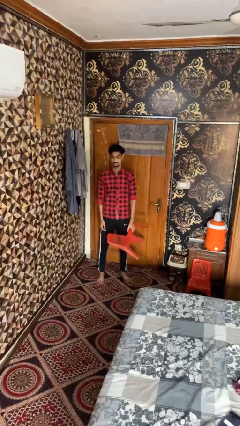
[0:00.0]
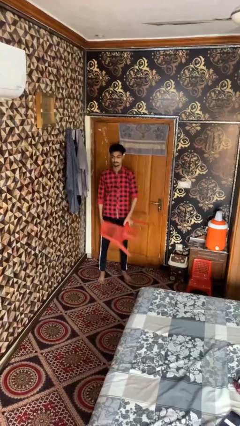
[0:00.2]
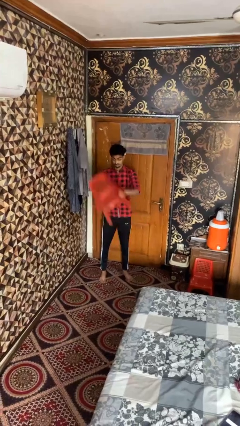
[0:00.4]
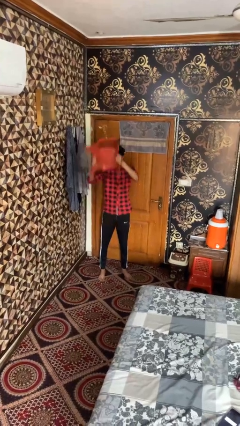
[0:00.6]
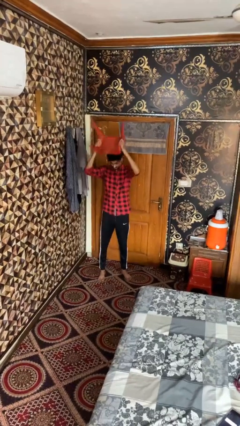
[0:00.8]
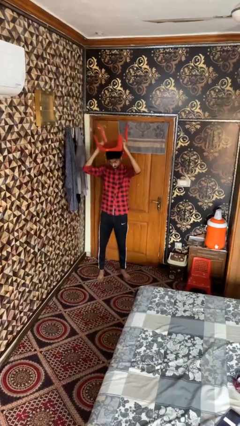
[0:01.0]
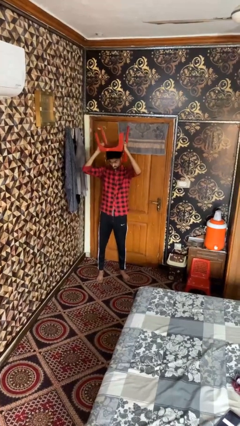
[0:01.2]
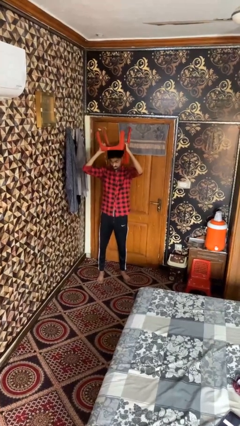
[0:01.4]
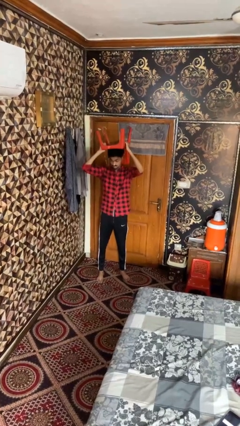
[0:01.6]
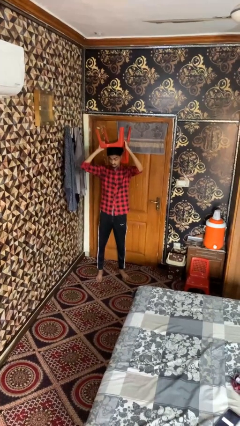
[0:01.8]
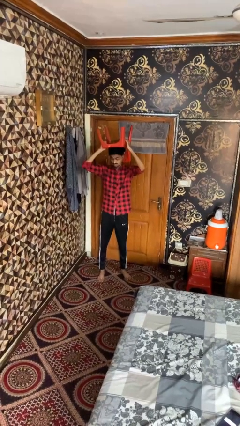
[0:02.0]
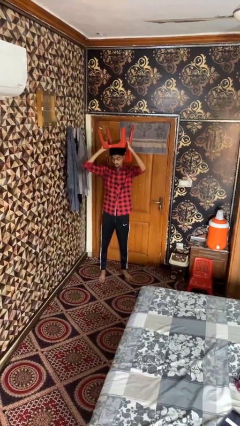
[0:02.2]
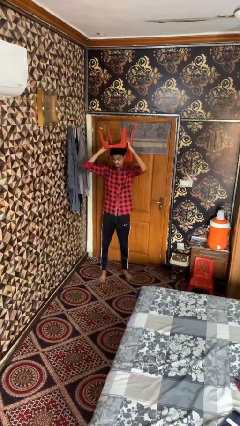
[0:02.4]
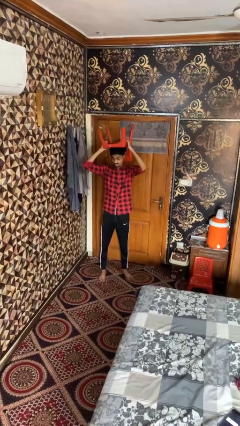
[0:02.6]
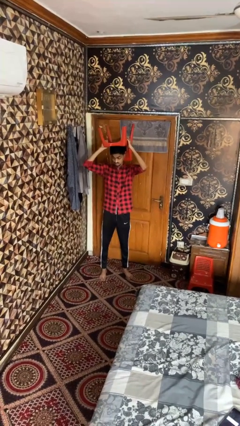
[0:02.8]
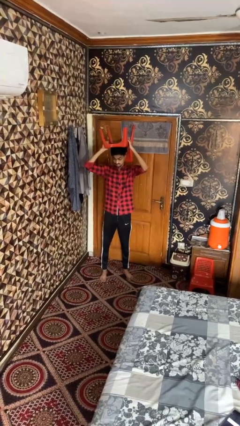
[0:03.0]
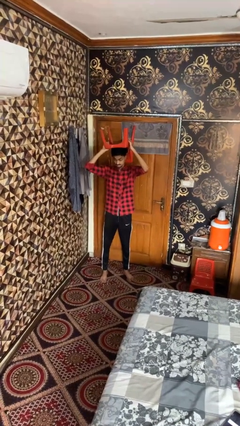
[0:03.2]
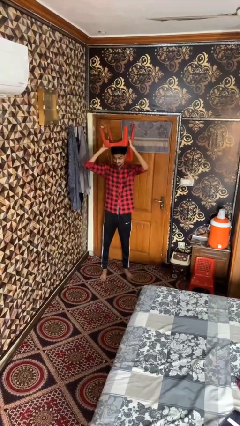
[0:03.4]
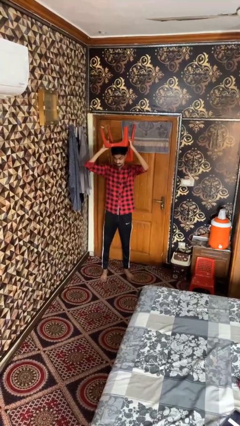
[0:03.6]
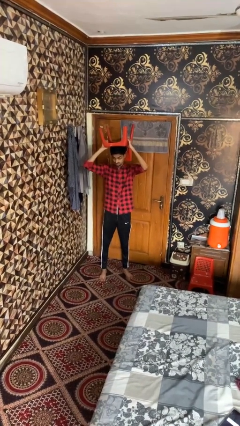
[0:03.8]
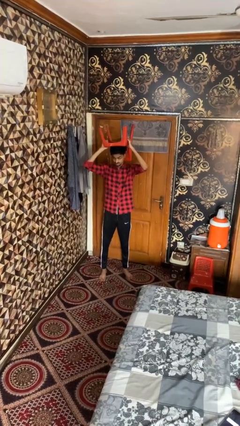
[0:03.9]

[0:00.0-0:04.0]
person holds object above head

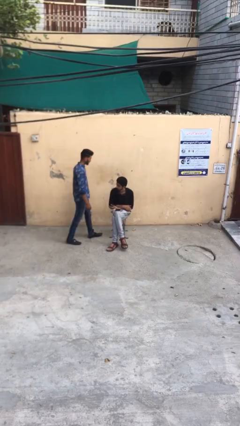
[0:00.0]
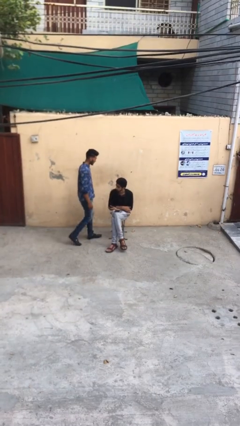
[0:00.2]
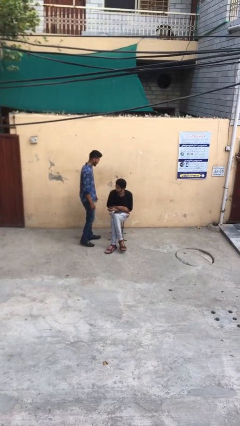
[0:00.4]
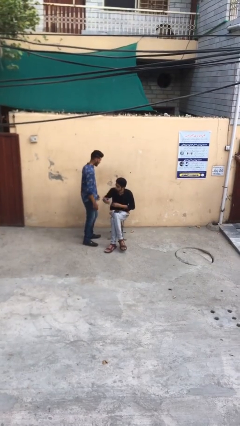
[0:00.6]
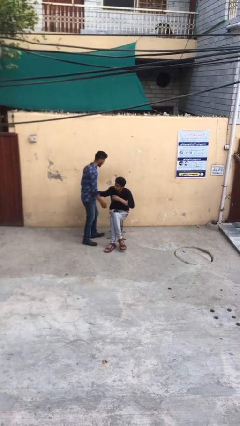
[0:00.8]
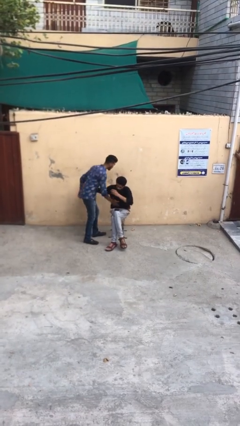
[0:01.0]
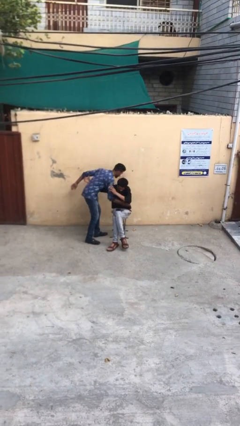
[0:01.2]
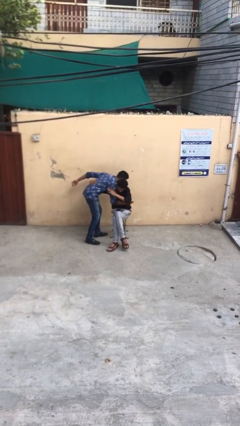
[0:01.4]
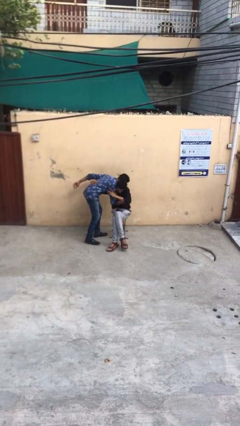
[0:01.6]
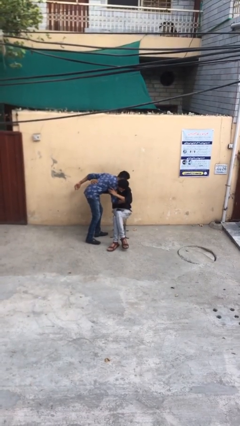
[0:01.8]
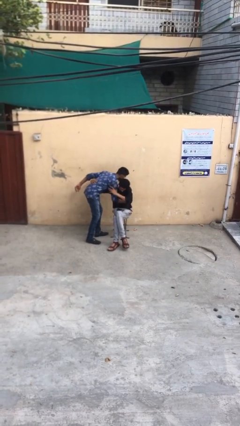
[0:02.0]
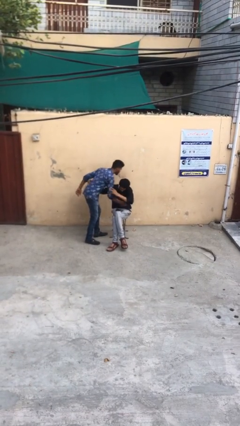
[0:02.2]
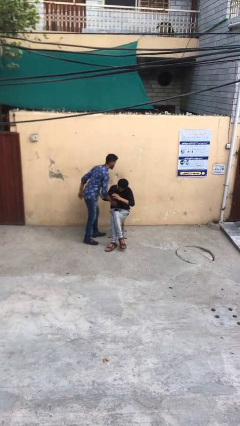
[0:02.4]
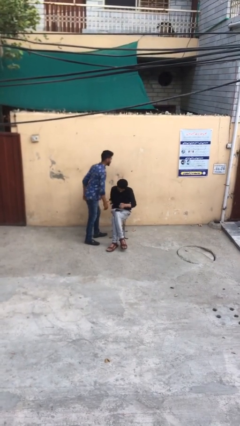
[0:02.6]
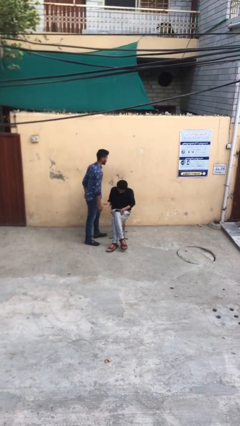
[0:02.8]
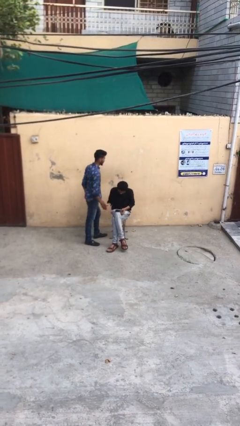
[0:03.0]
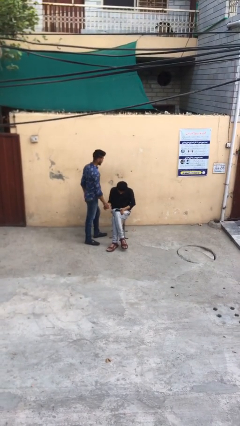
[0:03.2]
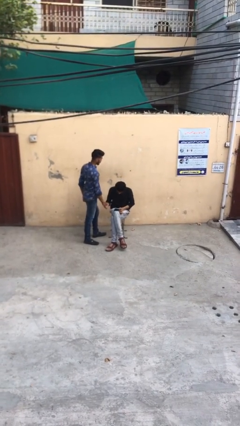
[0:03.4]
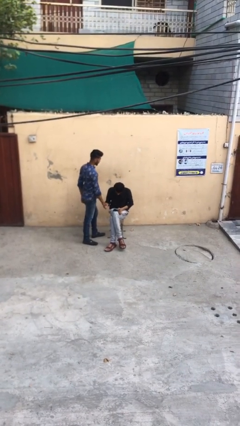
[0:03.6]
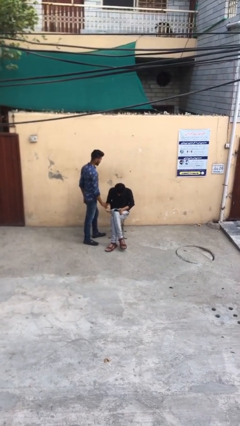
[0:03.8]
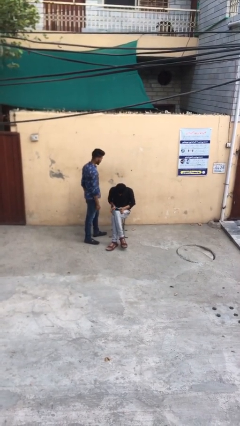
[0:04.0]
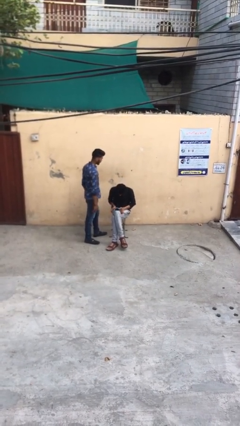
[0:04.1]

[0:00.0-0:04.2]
person embraces person

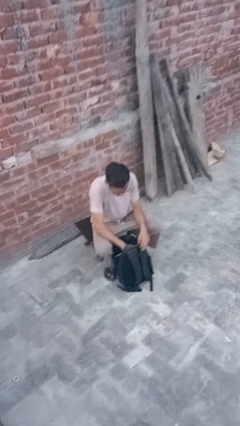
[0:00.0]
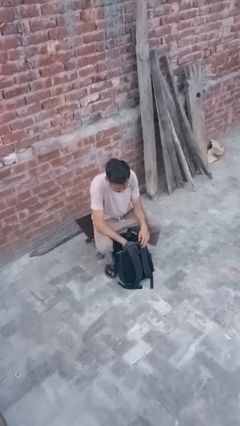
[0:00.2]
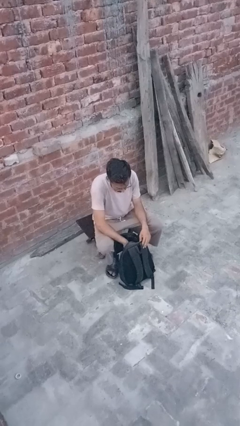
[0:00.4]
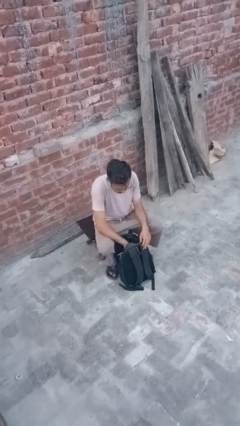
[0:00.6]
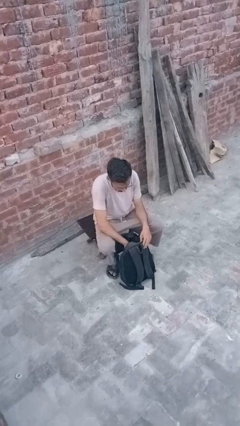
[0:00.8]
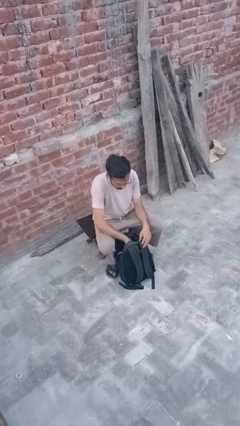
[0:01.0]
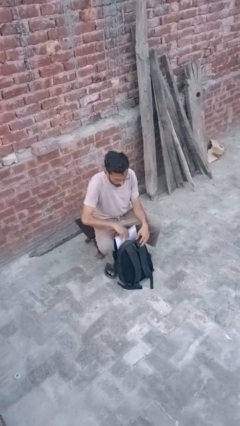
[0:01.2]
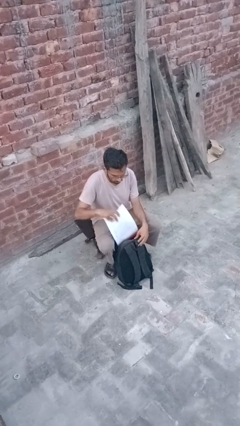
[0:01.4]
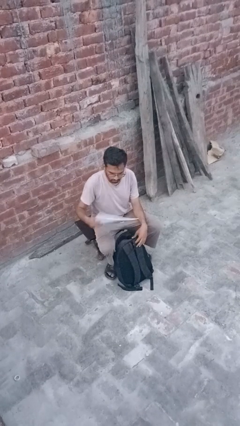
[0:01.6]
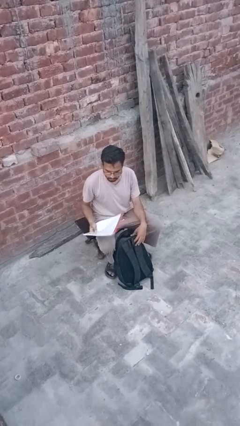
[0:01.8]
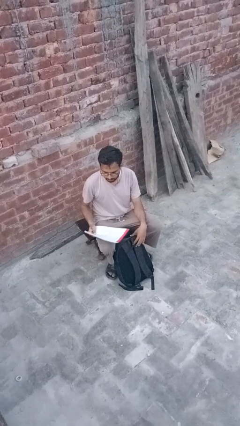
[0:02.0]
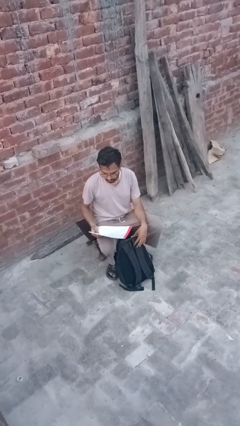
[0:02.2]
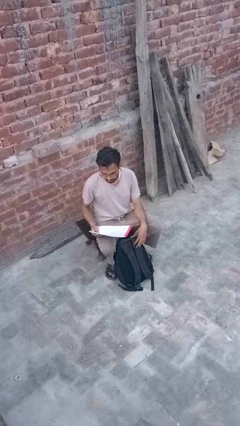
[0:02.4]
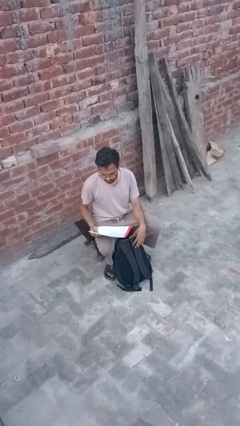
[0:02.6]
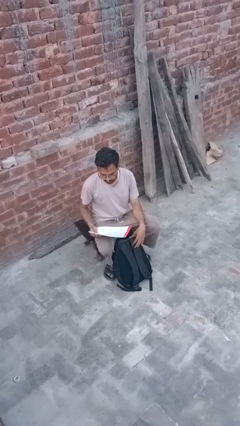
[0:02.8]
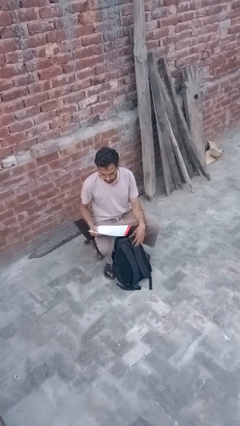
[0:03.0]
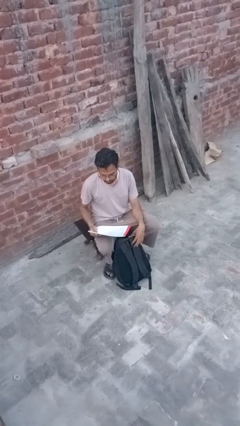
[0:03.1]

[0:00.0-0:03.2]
person takes object from backpack

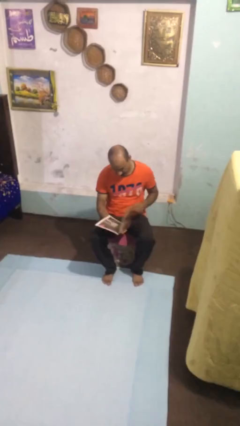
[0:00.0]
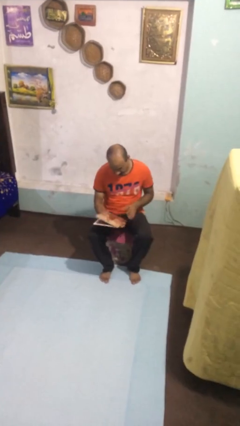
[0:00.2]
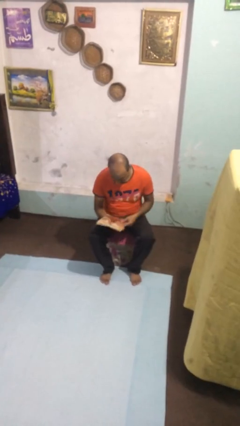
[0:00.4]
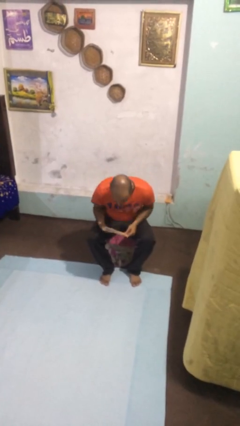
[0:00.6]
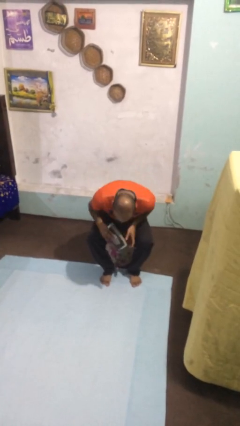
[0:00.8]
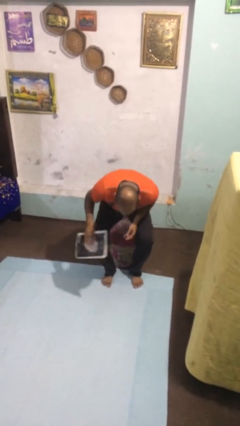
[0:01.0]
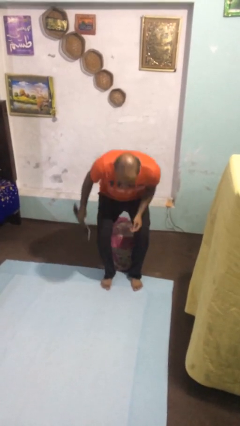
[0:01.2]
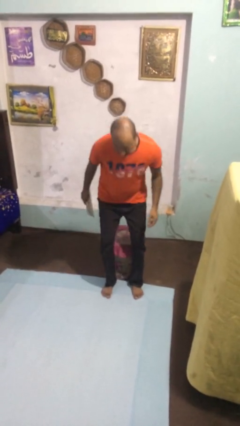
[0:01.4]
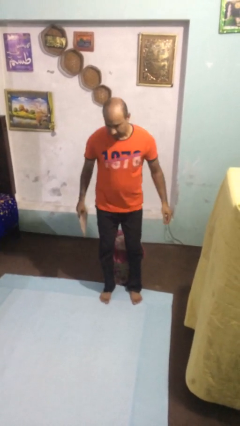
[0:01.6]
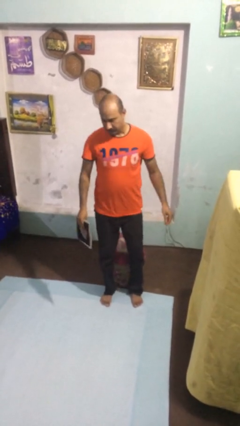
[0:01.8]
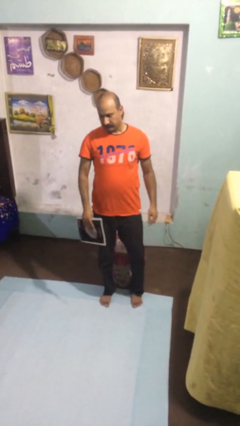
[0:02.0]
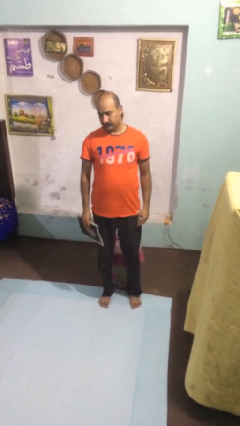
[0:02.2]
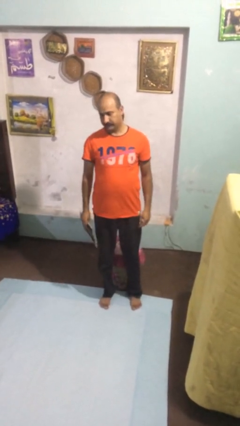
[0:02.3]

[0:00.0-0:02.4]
person stands up

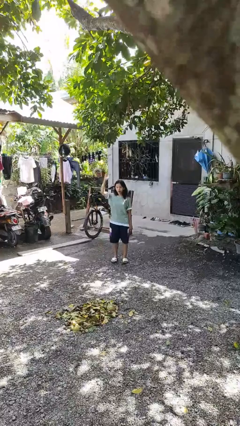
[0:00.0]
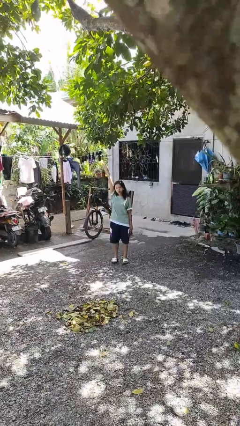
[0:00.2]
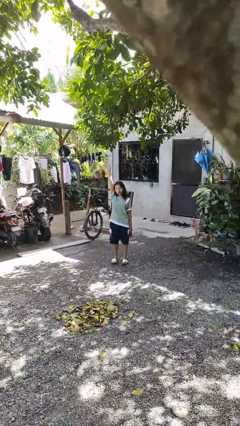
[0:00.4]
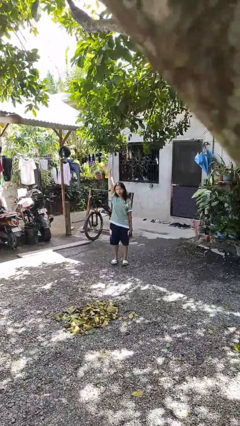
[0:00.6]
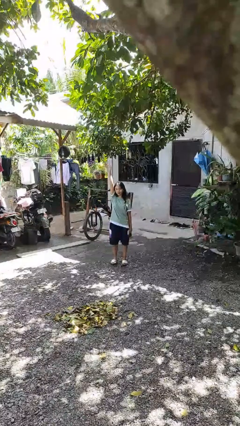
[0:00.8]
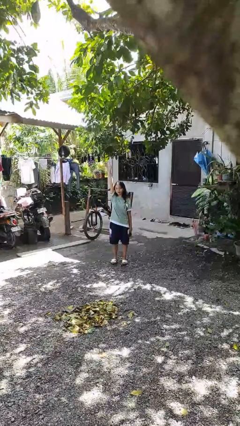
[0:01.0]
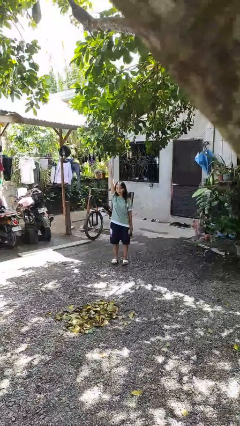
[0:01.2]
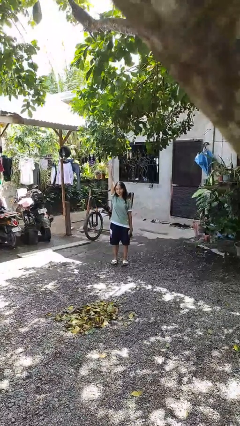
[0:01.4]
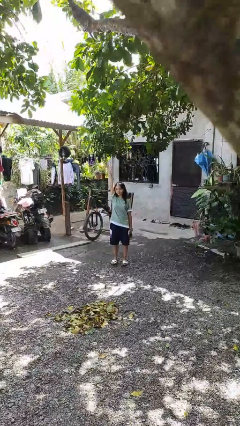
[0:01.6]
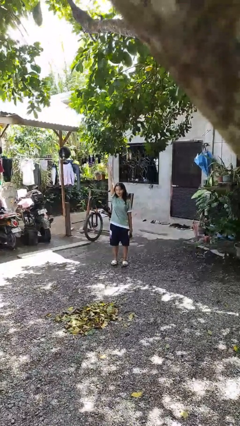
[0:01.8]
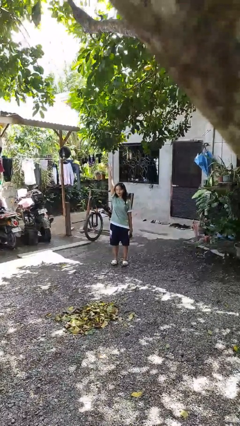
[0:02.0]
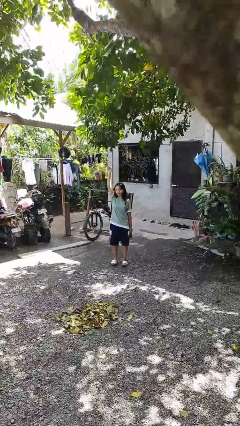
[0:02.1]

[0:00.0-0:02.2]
person gestures raise hand

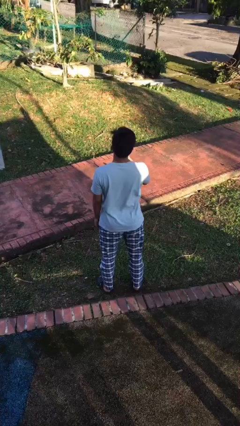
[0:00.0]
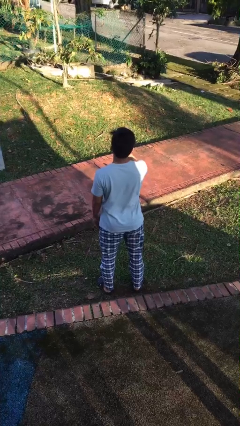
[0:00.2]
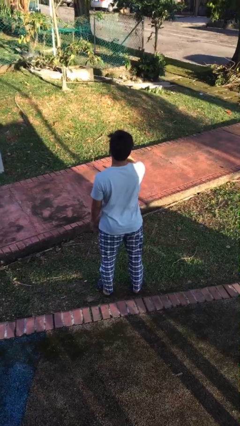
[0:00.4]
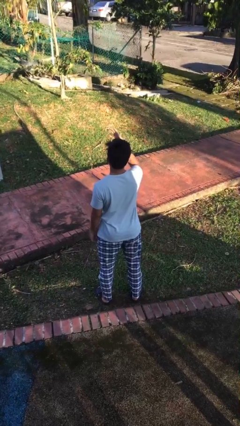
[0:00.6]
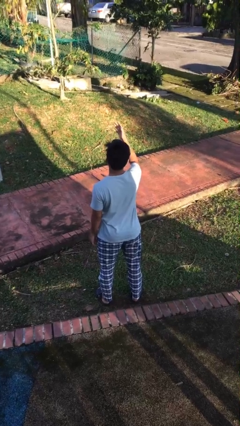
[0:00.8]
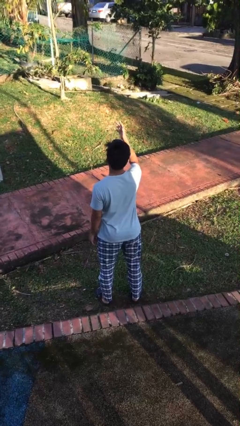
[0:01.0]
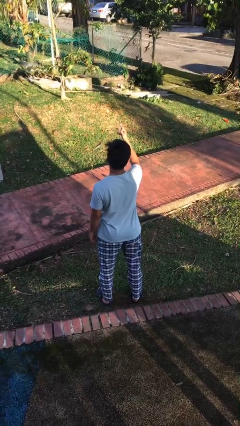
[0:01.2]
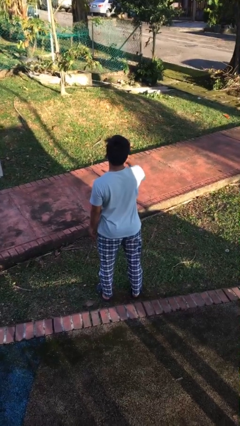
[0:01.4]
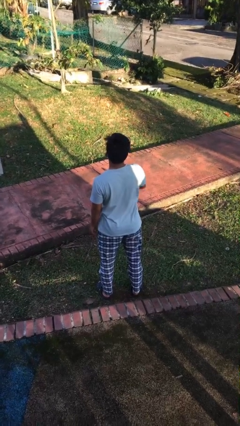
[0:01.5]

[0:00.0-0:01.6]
person gestures blow kiss

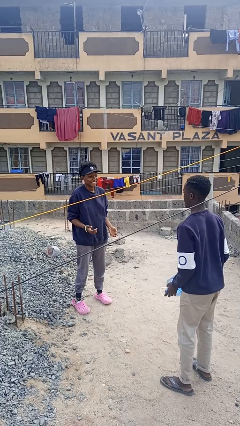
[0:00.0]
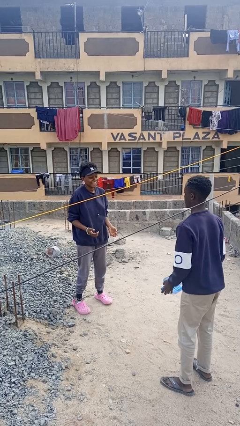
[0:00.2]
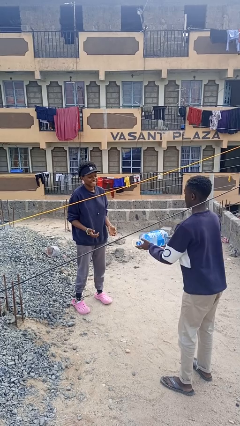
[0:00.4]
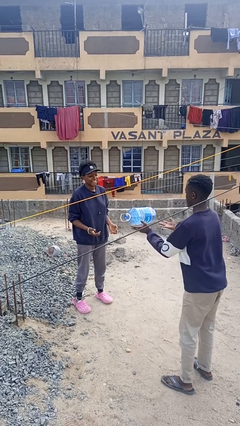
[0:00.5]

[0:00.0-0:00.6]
person throws object to person
